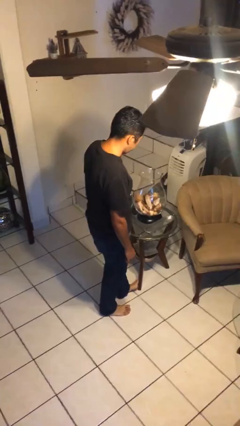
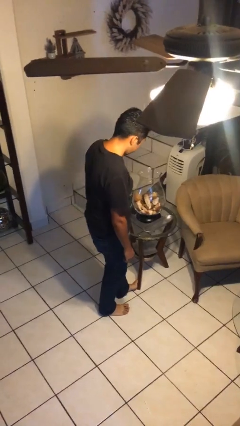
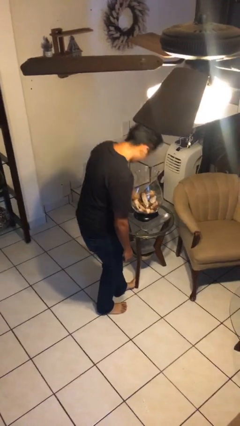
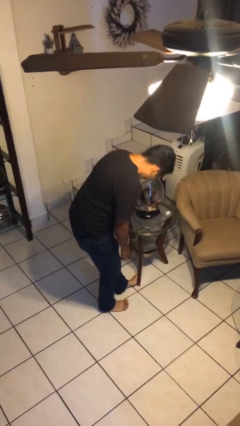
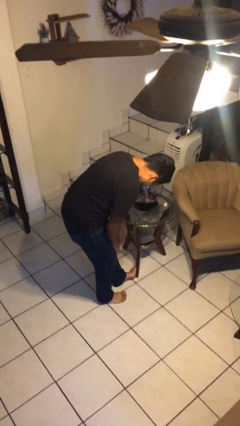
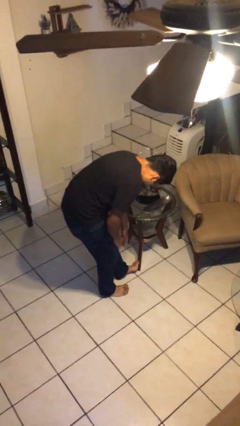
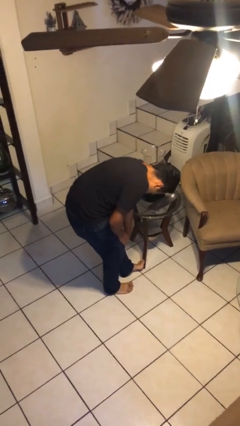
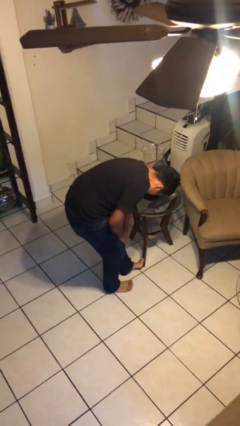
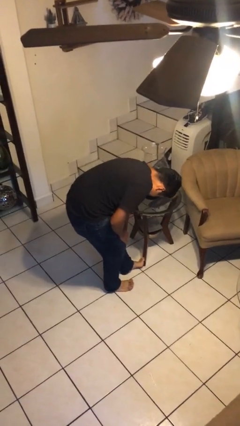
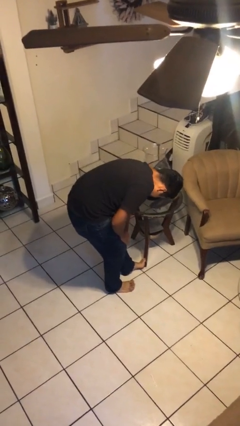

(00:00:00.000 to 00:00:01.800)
person stubs toe

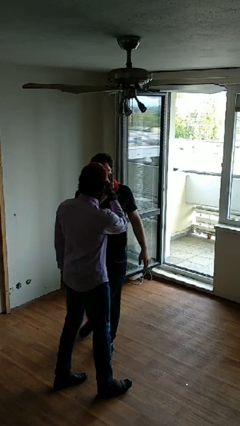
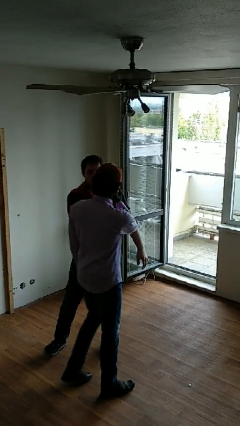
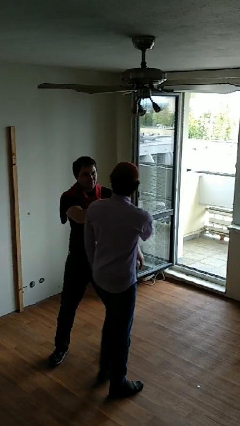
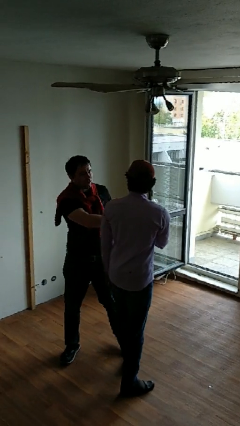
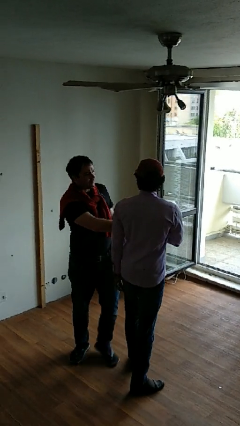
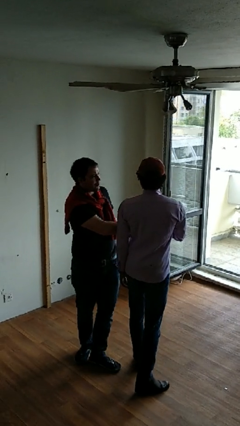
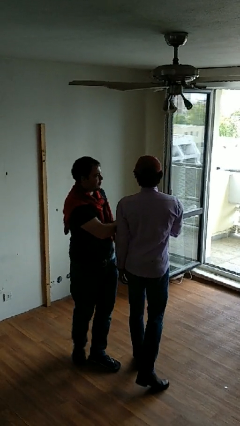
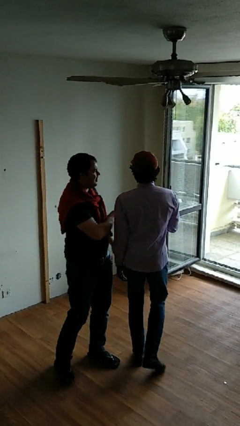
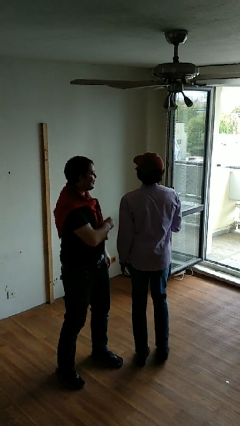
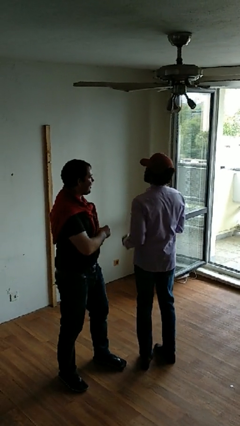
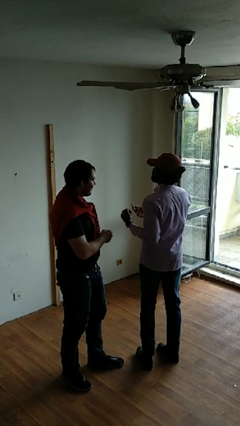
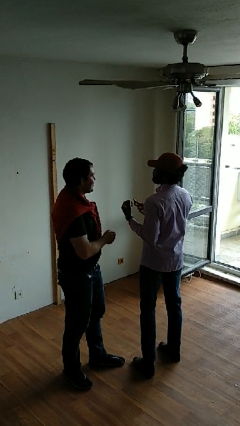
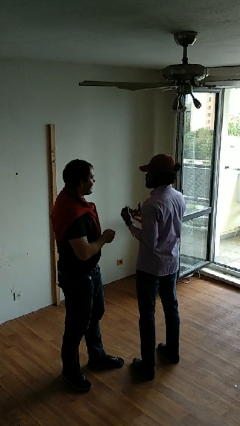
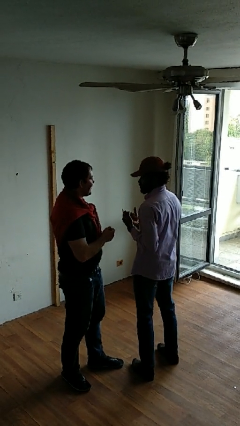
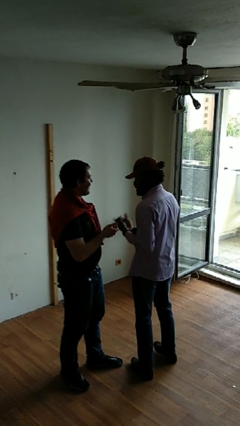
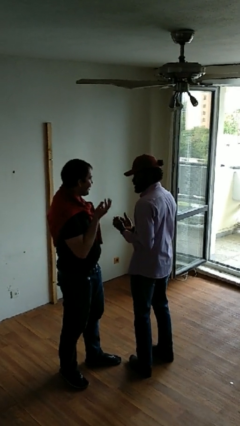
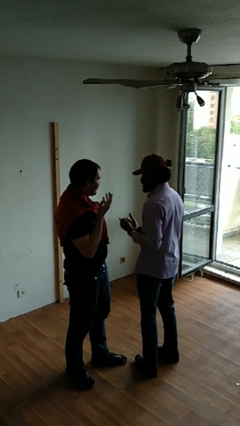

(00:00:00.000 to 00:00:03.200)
person highfives hand

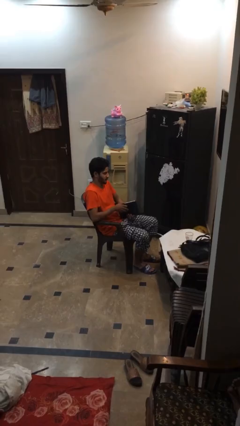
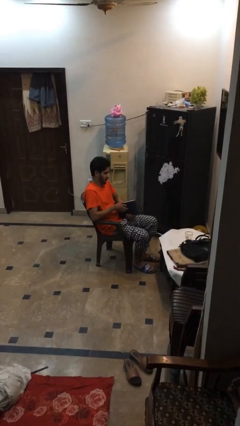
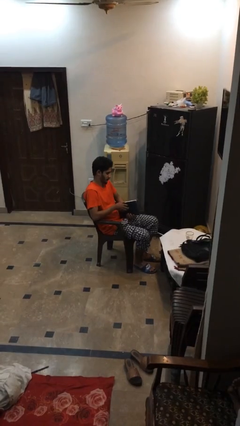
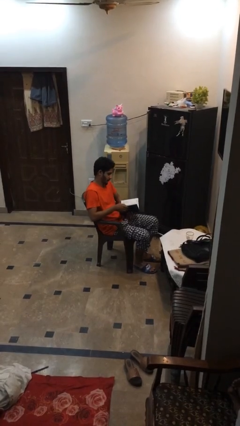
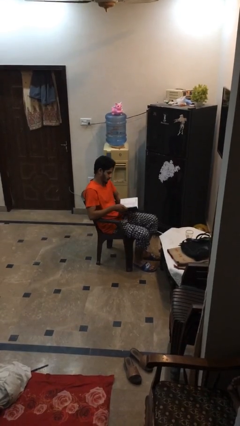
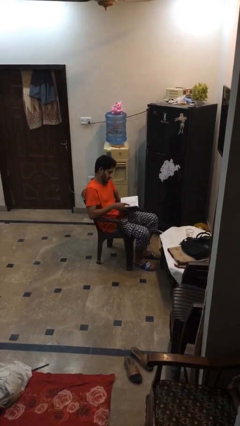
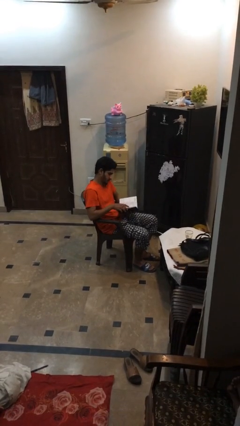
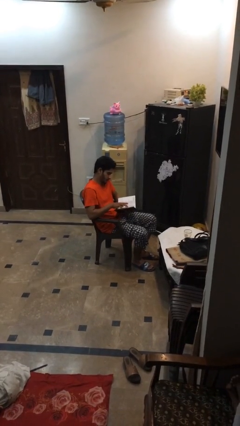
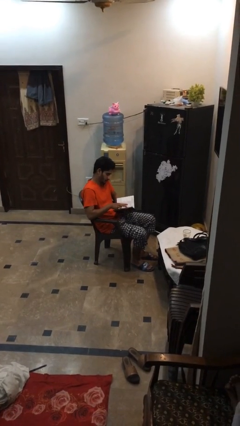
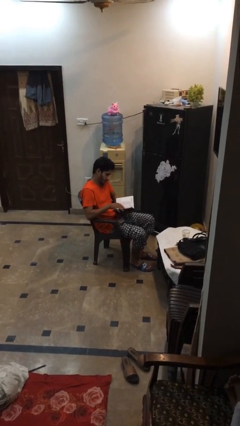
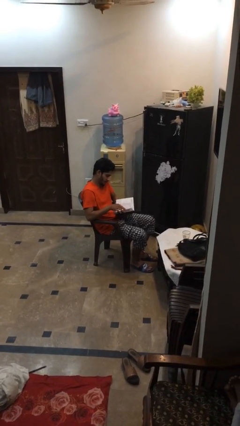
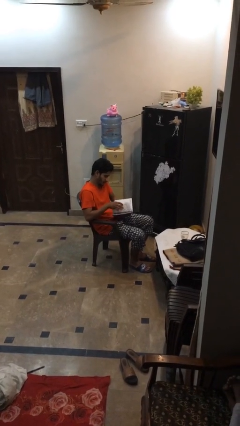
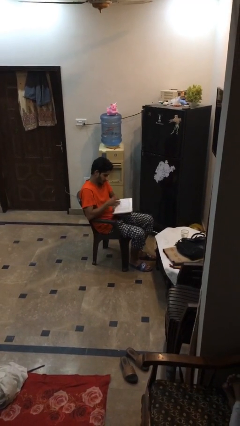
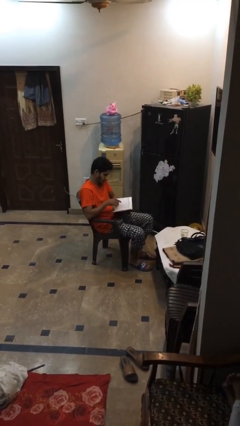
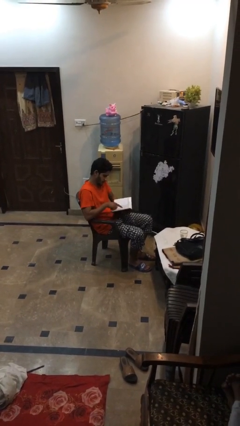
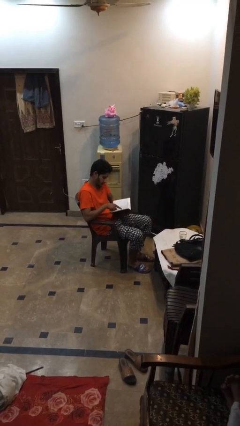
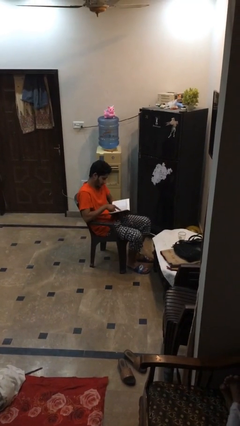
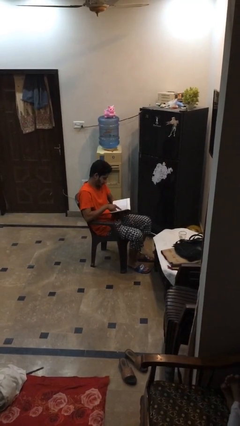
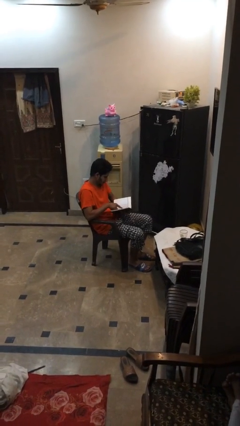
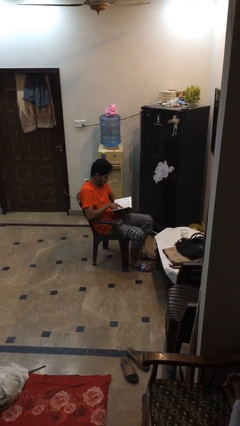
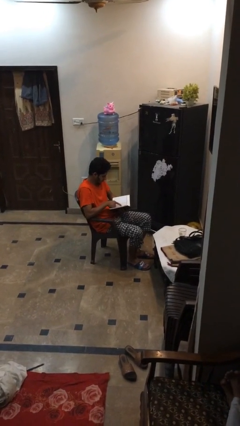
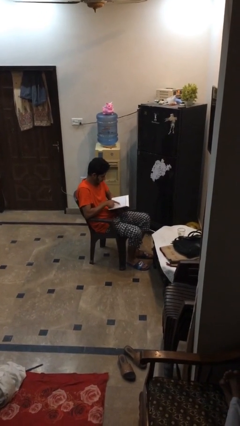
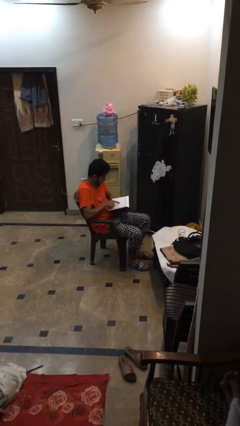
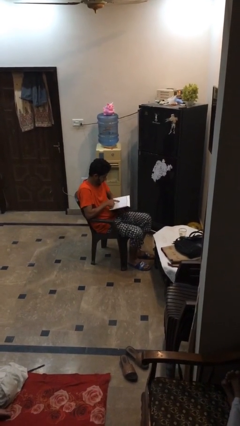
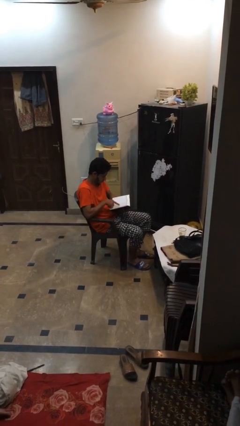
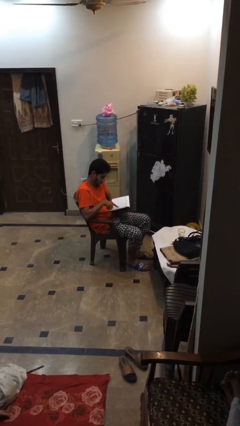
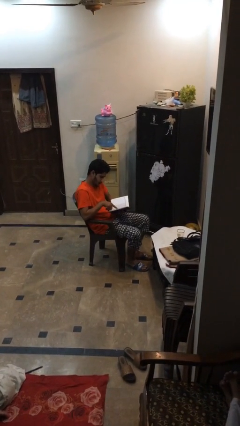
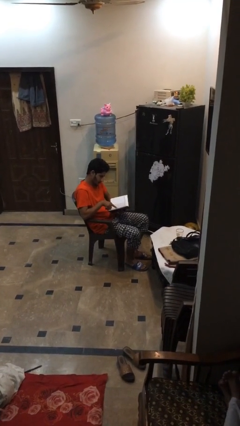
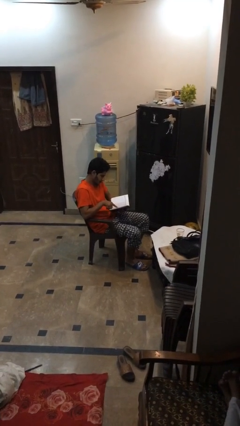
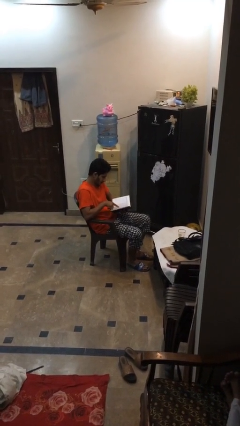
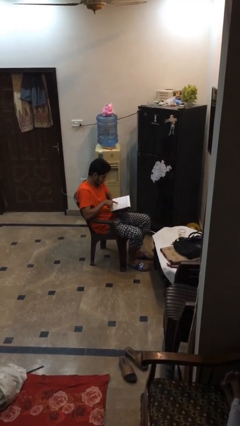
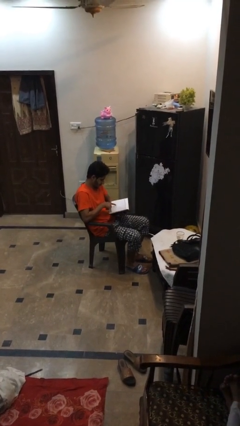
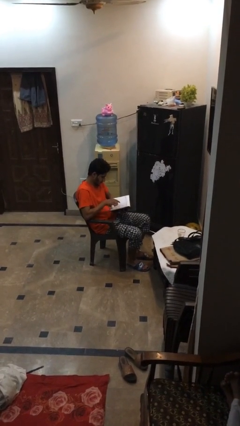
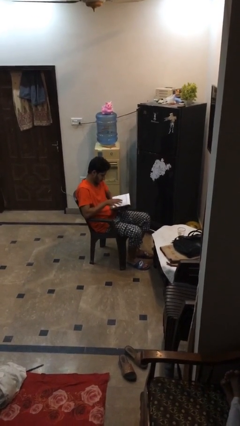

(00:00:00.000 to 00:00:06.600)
person reads document

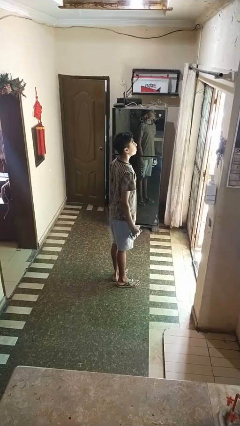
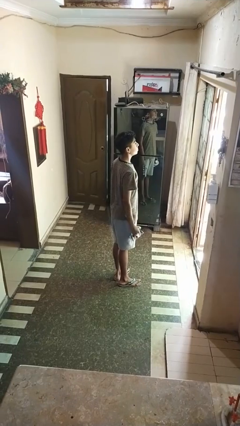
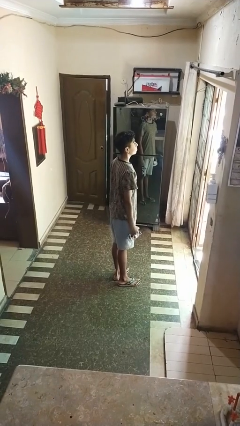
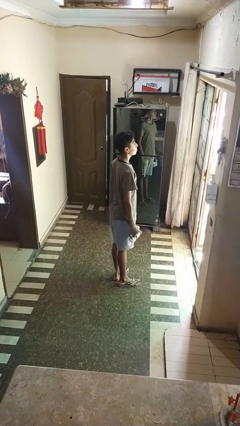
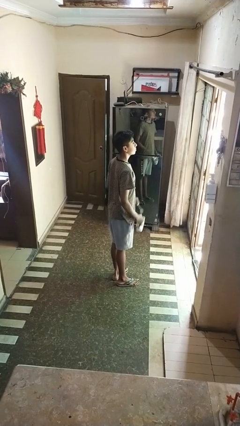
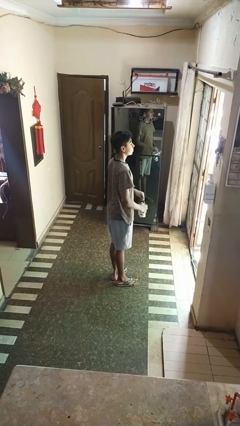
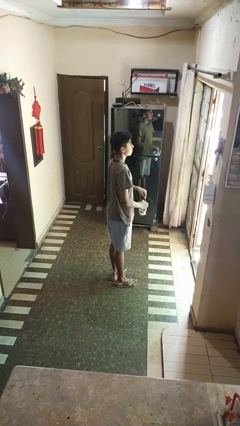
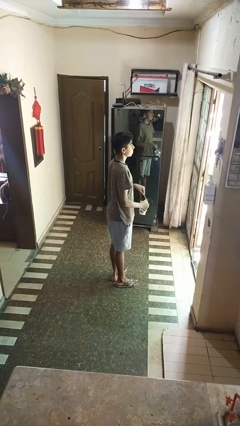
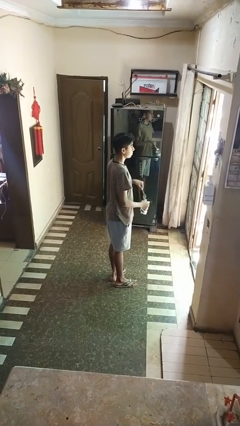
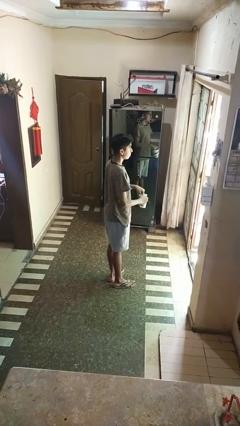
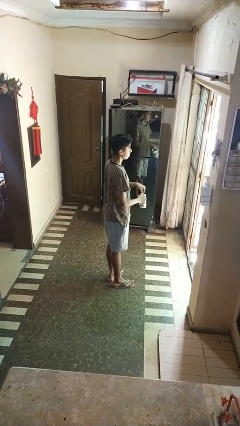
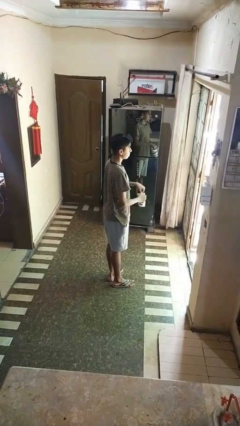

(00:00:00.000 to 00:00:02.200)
person stirs mug

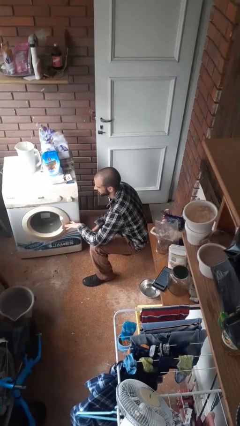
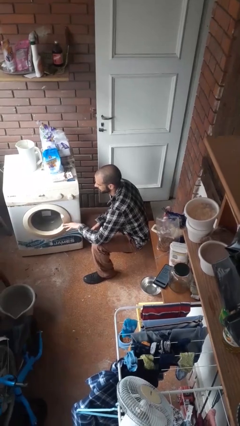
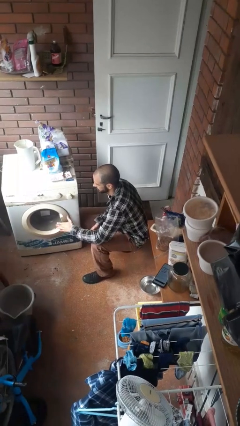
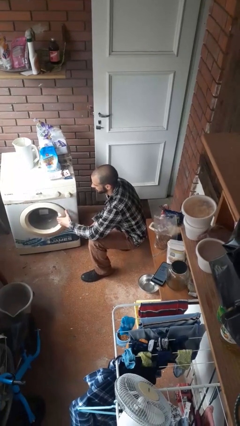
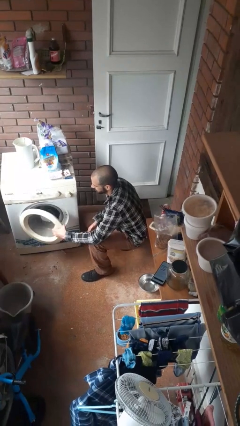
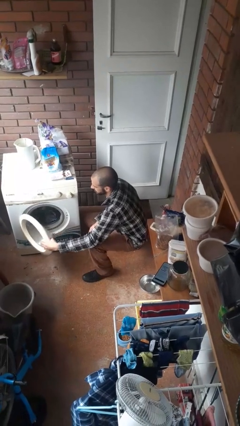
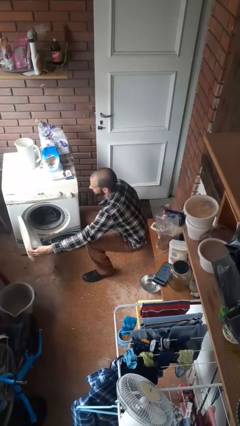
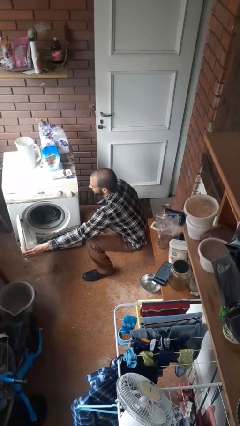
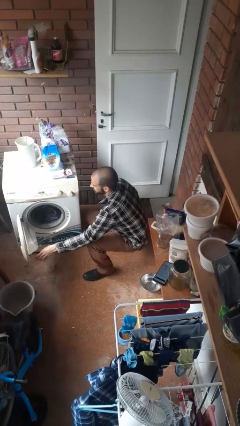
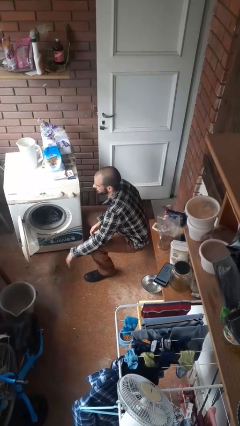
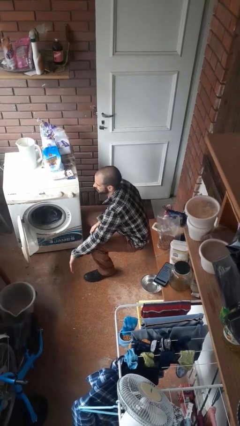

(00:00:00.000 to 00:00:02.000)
person opens clothes washer

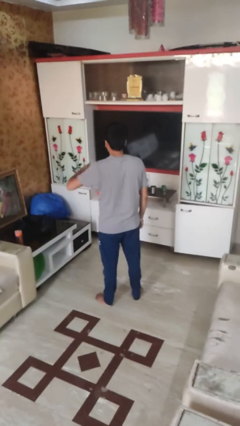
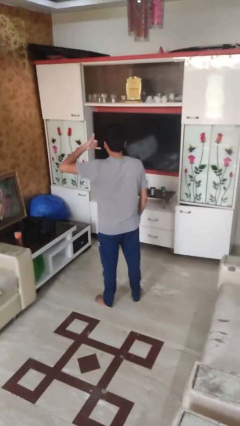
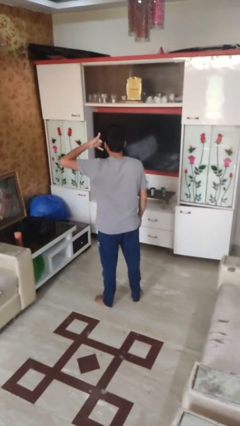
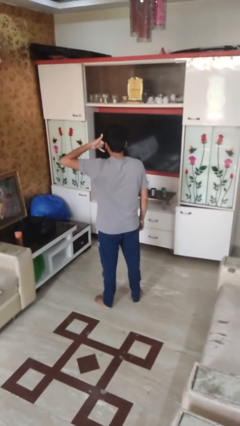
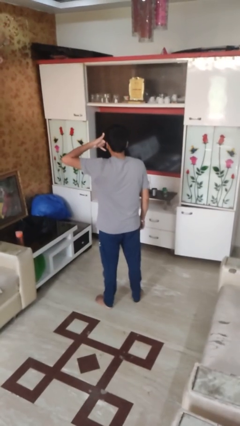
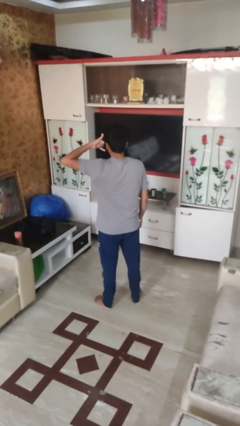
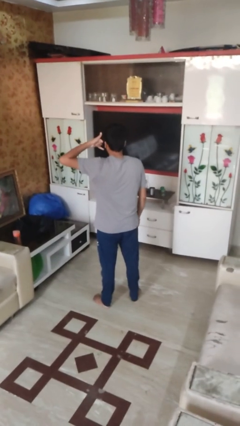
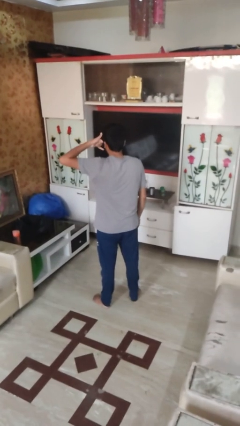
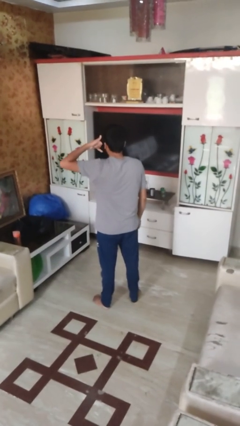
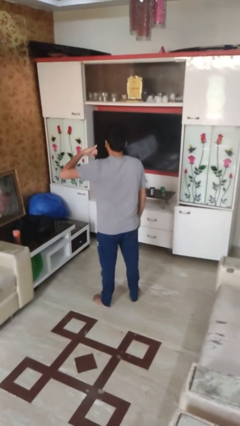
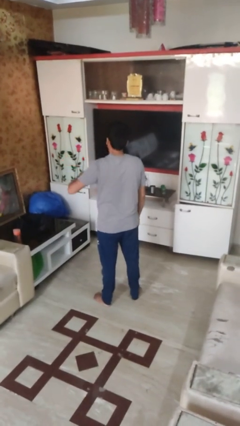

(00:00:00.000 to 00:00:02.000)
person gestures call me
